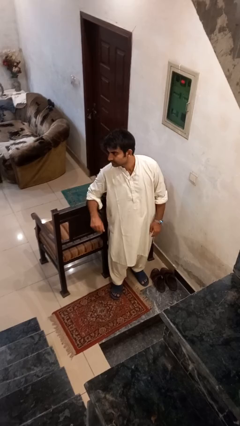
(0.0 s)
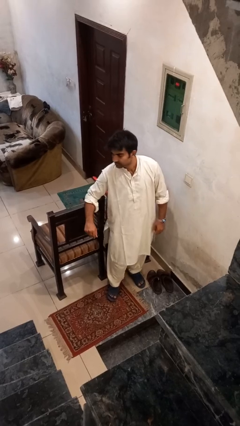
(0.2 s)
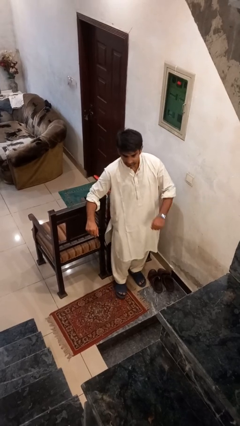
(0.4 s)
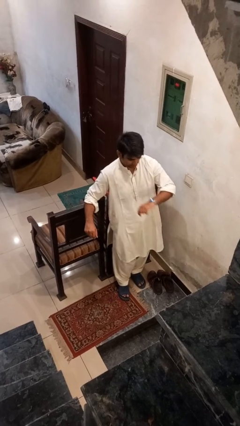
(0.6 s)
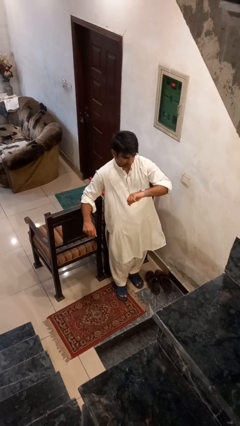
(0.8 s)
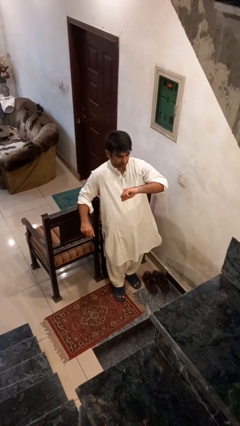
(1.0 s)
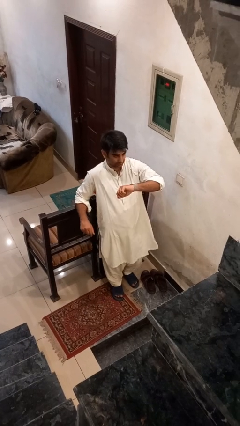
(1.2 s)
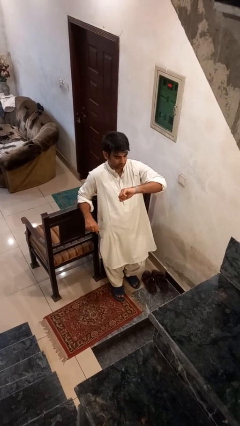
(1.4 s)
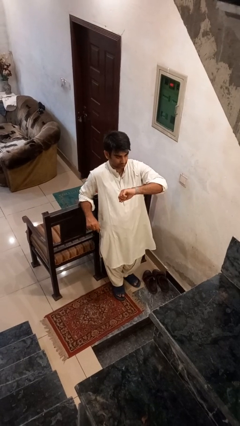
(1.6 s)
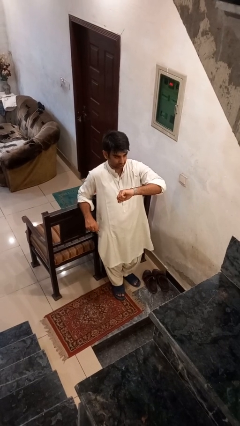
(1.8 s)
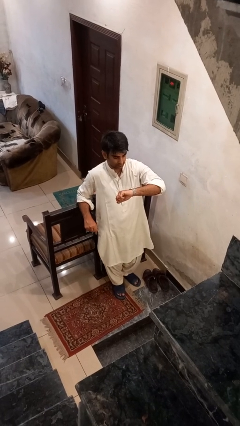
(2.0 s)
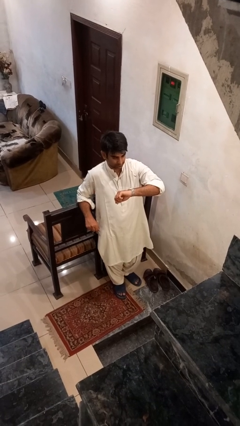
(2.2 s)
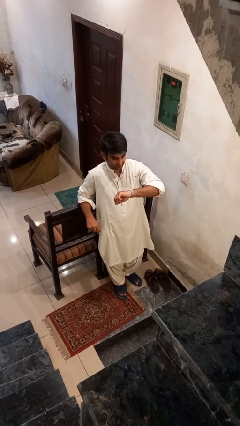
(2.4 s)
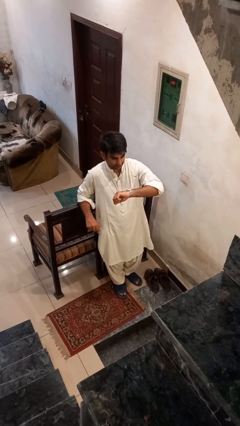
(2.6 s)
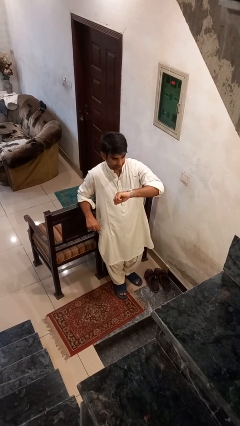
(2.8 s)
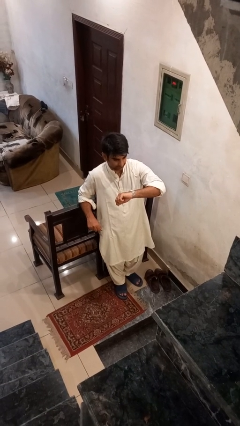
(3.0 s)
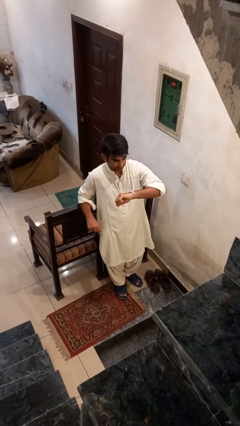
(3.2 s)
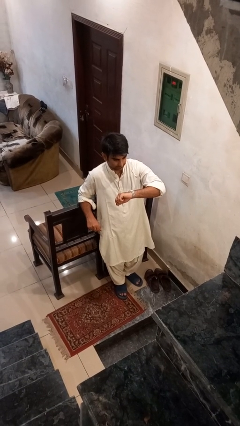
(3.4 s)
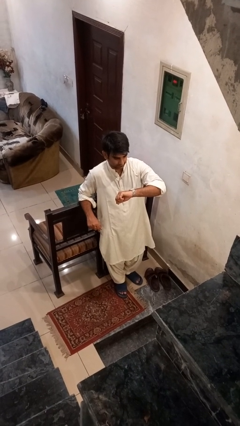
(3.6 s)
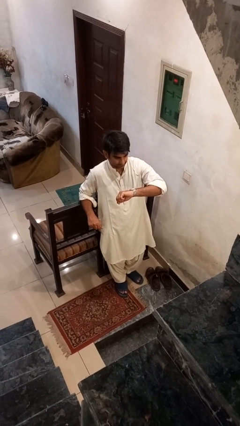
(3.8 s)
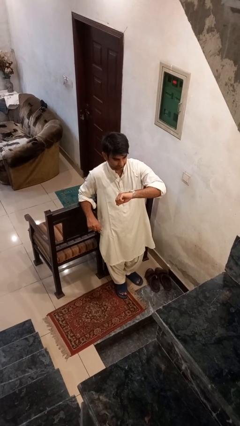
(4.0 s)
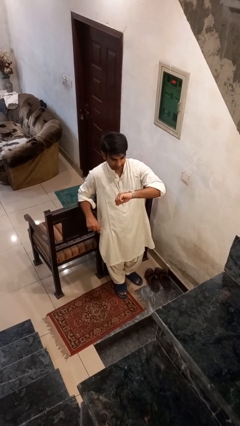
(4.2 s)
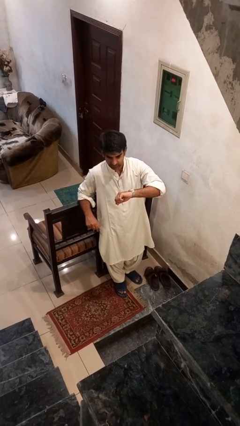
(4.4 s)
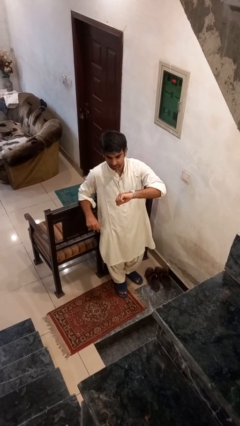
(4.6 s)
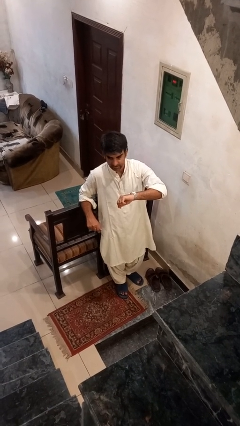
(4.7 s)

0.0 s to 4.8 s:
person looks at wristwatch

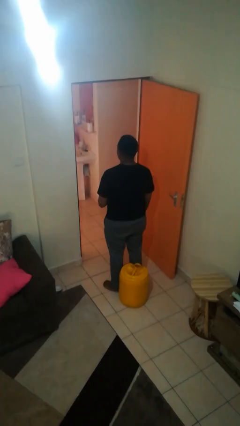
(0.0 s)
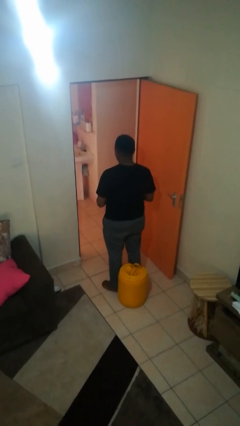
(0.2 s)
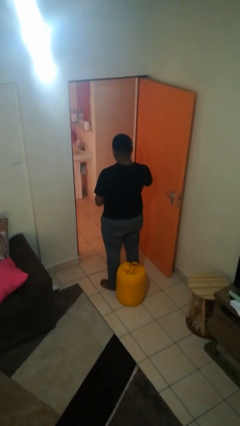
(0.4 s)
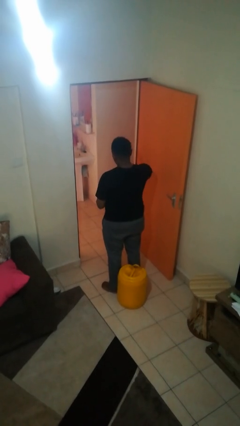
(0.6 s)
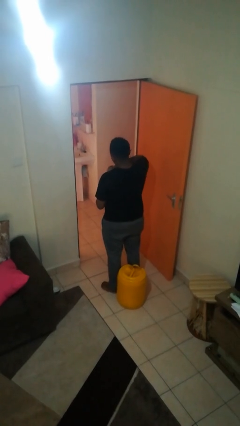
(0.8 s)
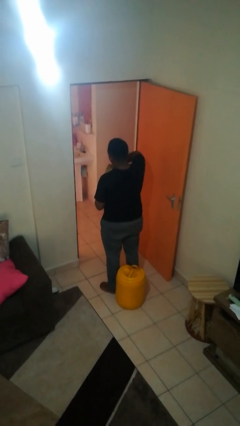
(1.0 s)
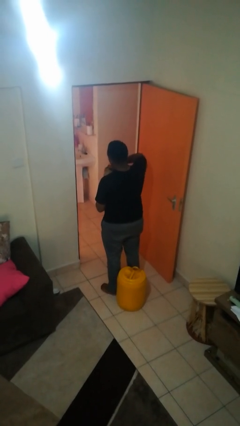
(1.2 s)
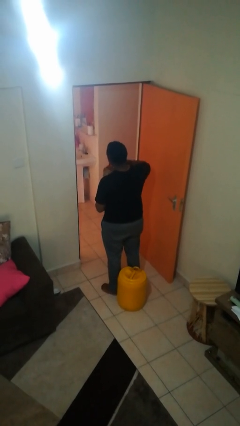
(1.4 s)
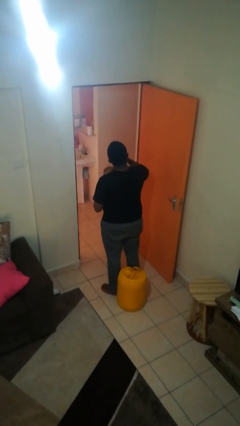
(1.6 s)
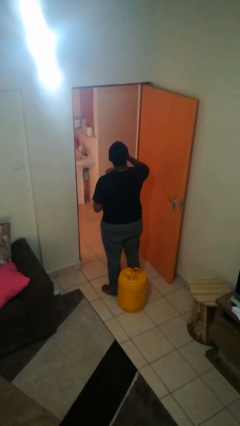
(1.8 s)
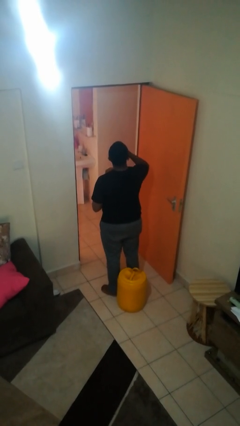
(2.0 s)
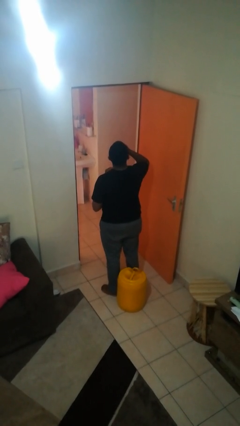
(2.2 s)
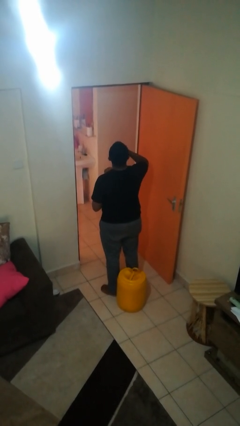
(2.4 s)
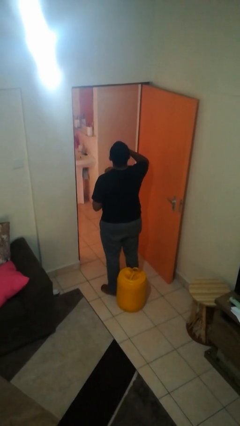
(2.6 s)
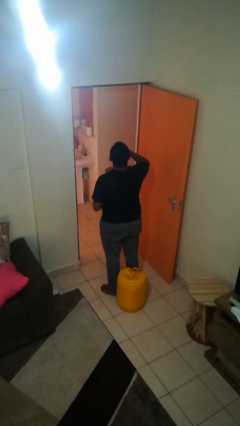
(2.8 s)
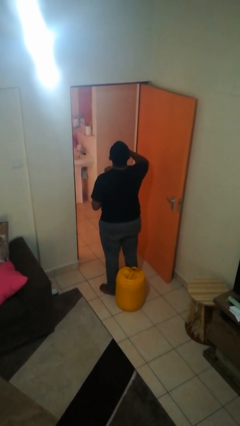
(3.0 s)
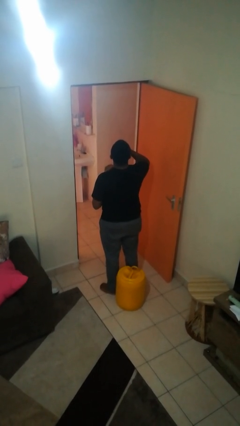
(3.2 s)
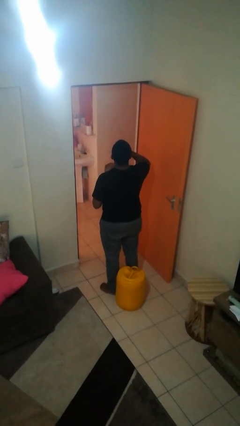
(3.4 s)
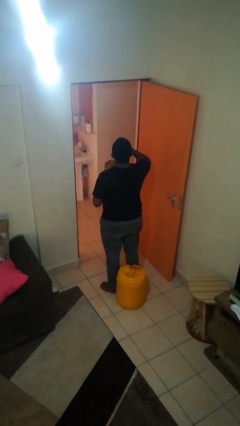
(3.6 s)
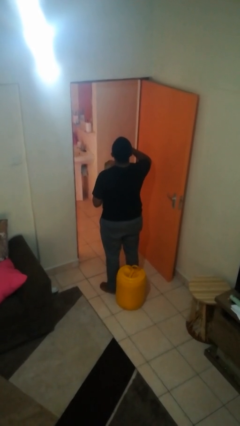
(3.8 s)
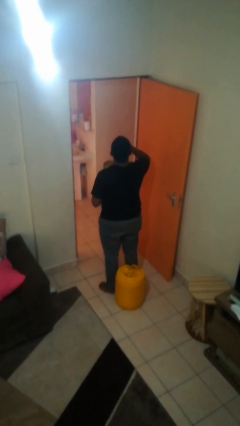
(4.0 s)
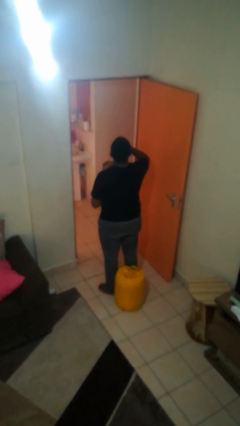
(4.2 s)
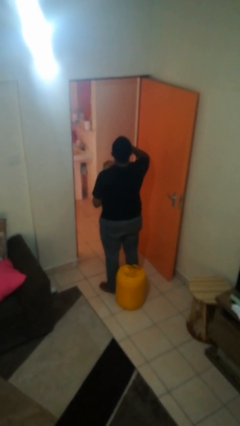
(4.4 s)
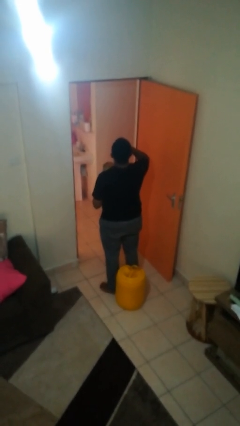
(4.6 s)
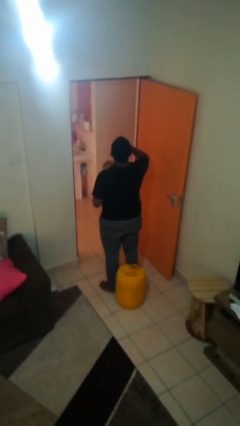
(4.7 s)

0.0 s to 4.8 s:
person eats snack from bag

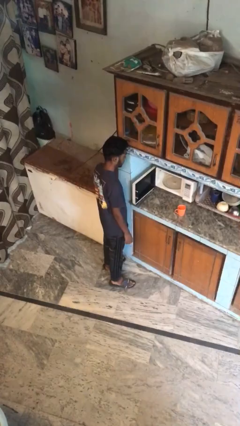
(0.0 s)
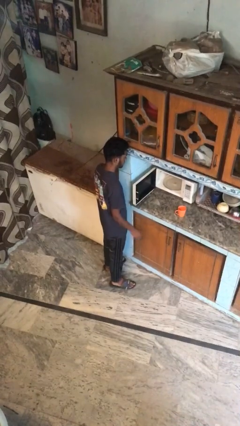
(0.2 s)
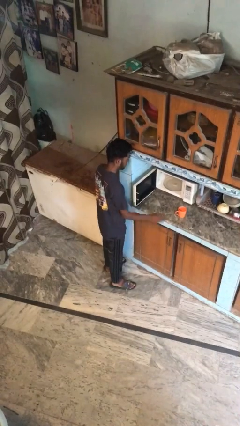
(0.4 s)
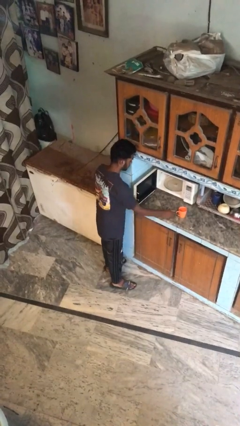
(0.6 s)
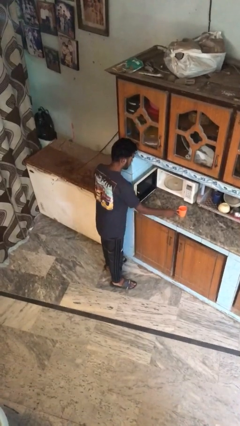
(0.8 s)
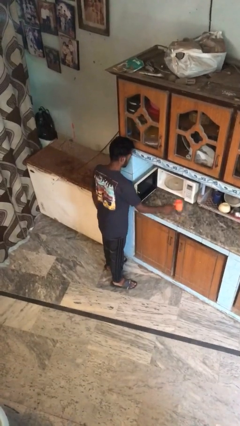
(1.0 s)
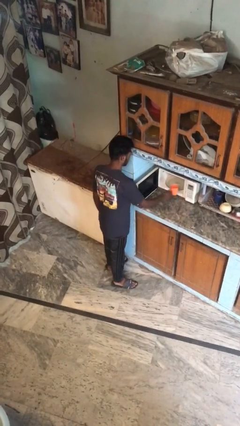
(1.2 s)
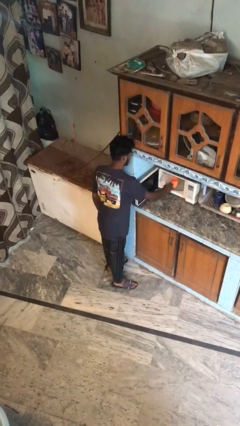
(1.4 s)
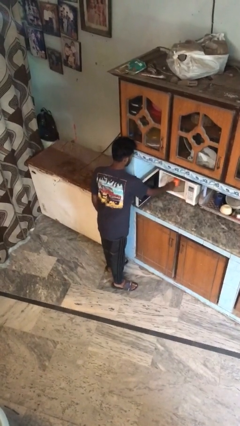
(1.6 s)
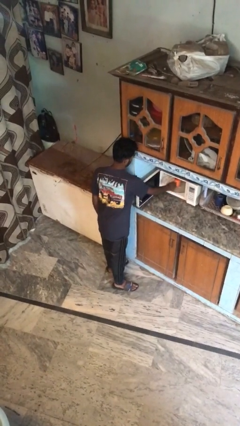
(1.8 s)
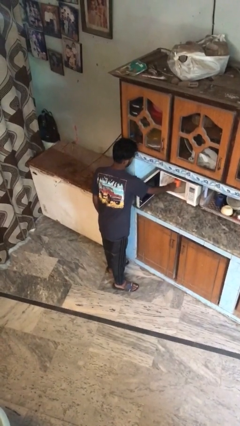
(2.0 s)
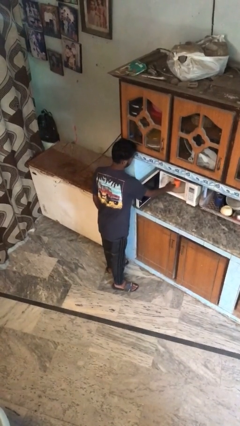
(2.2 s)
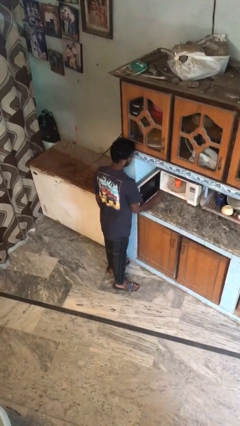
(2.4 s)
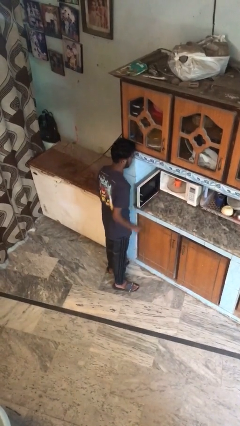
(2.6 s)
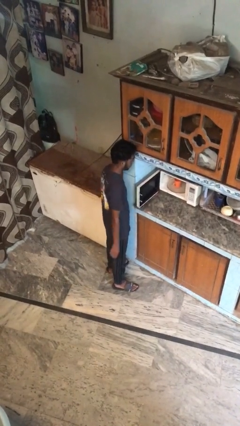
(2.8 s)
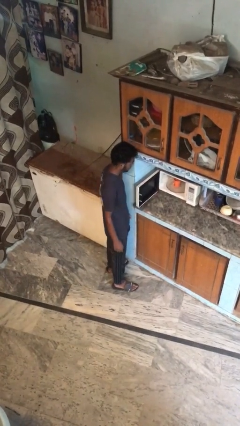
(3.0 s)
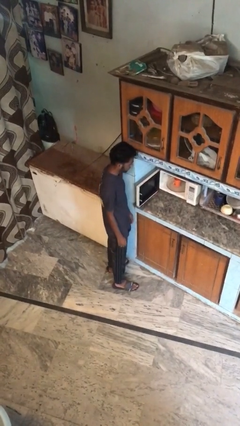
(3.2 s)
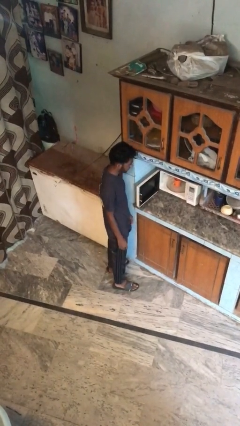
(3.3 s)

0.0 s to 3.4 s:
person puts object into microwave

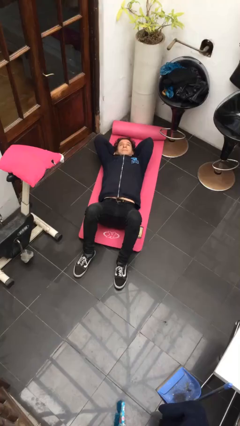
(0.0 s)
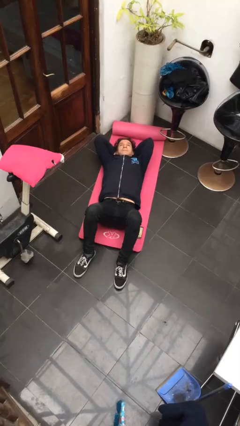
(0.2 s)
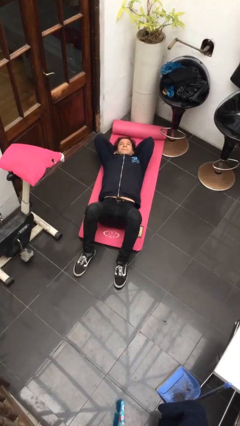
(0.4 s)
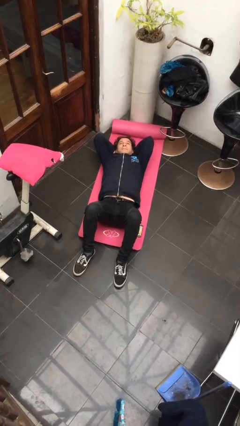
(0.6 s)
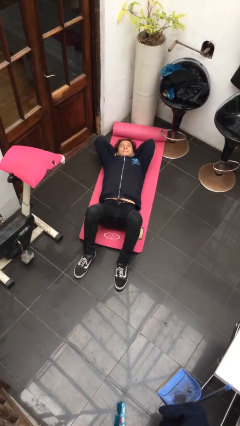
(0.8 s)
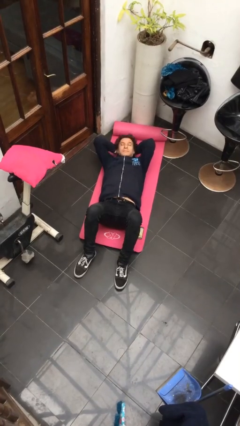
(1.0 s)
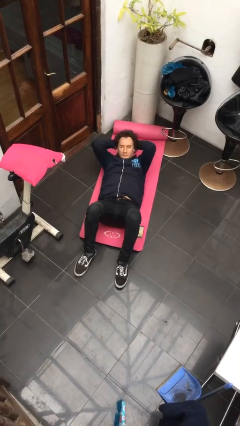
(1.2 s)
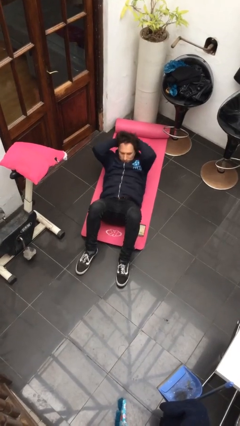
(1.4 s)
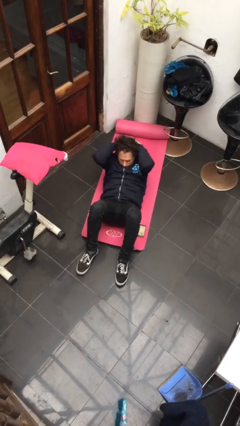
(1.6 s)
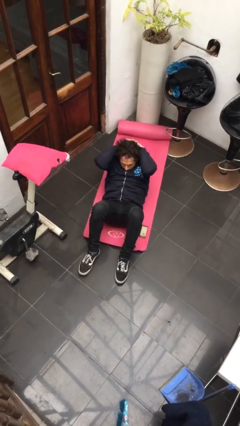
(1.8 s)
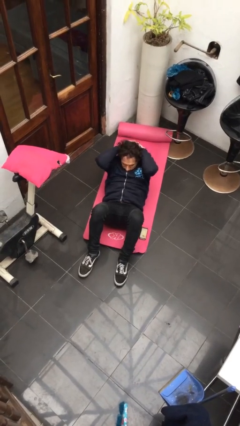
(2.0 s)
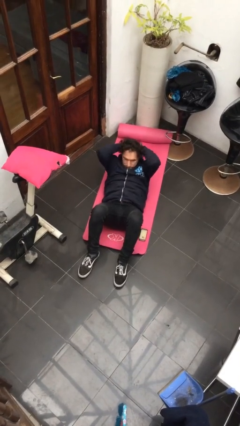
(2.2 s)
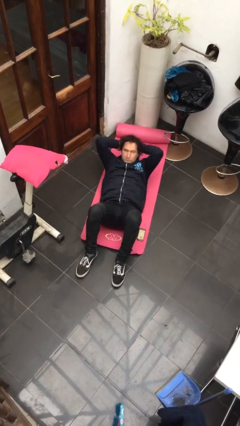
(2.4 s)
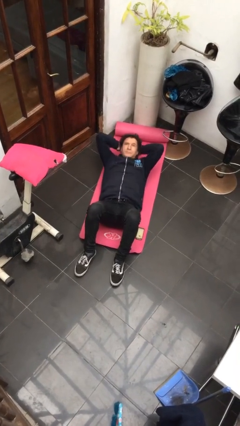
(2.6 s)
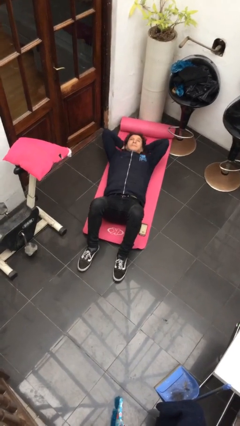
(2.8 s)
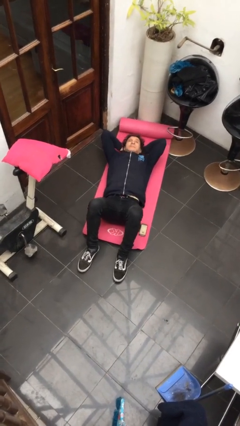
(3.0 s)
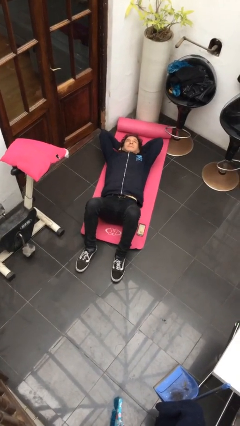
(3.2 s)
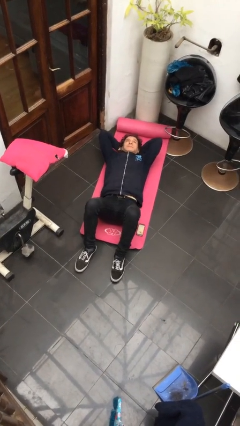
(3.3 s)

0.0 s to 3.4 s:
person exercises with situp

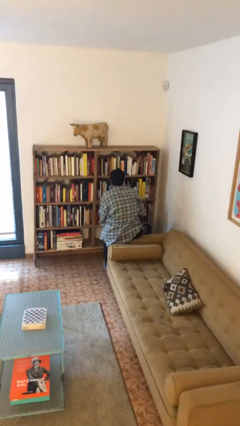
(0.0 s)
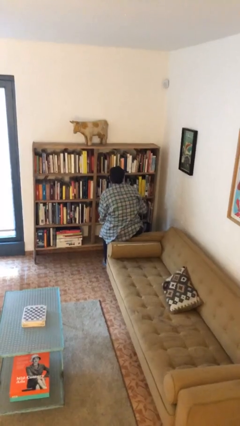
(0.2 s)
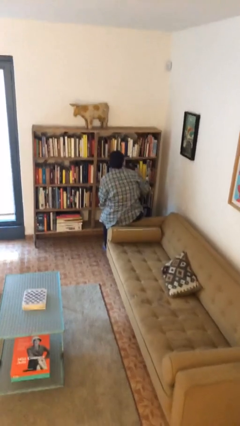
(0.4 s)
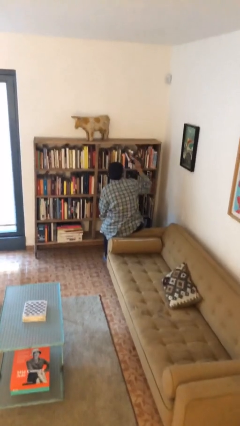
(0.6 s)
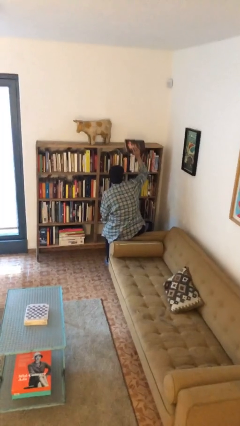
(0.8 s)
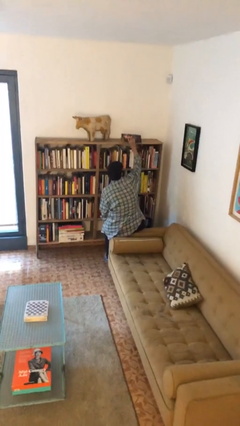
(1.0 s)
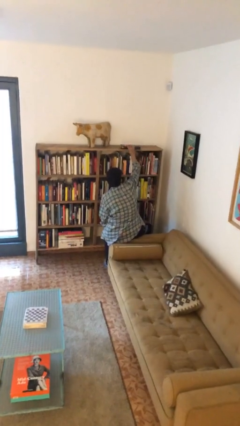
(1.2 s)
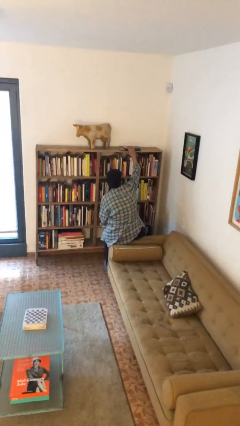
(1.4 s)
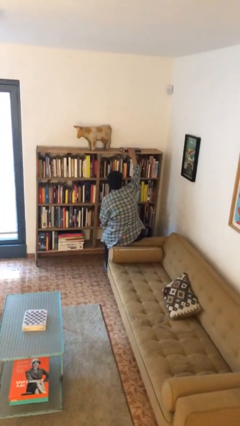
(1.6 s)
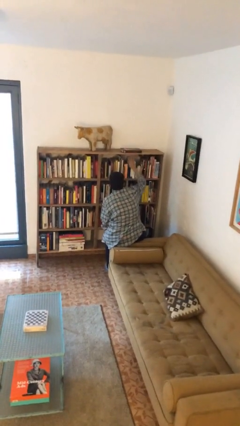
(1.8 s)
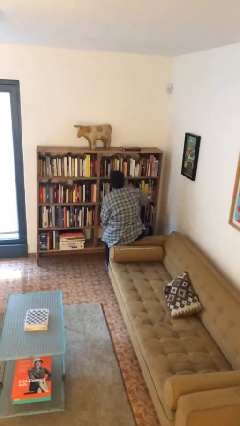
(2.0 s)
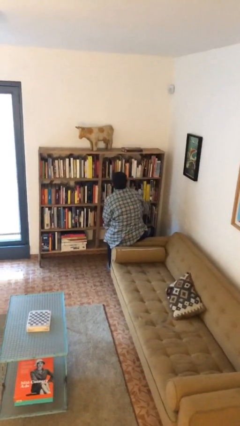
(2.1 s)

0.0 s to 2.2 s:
person puts down object on shelf
